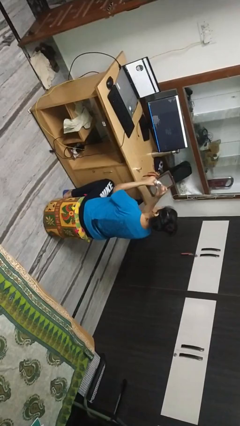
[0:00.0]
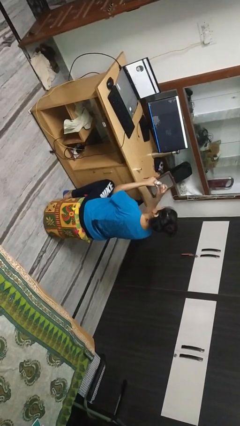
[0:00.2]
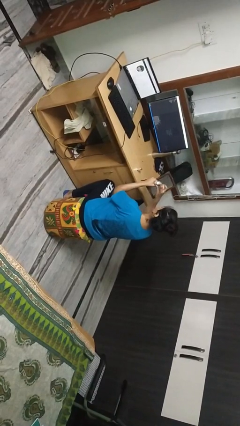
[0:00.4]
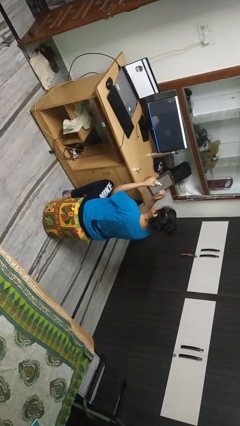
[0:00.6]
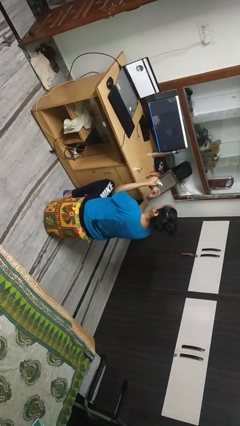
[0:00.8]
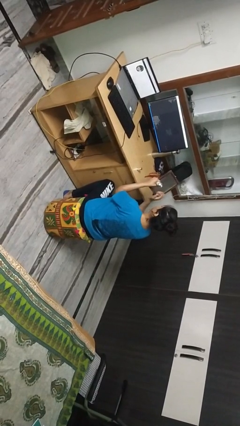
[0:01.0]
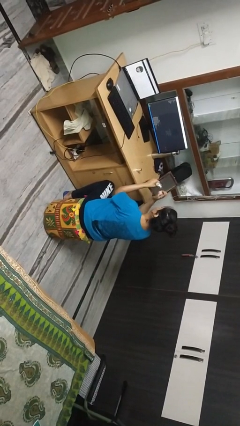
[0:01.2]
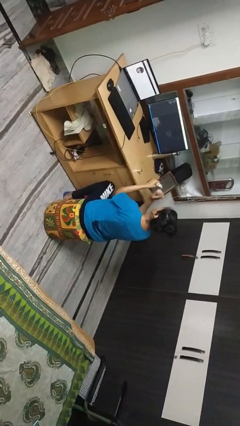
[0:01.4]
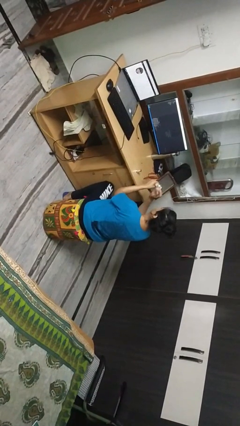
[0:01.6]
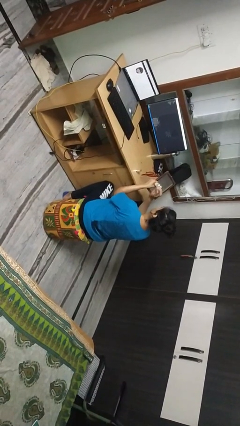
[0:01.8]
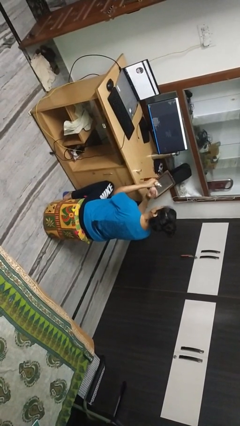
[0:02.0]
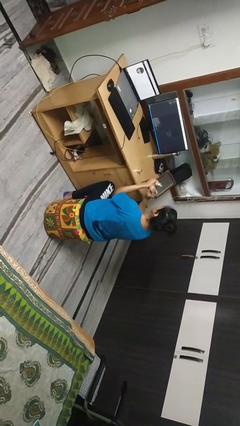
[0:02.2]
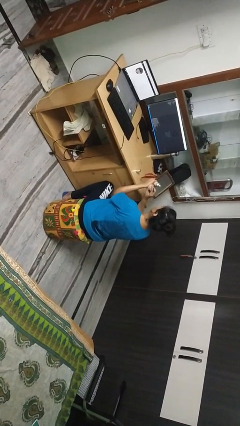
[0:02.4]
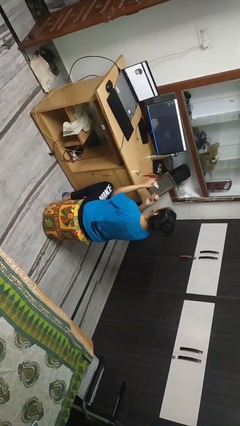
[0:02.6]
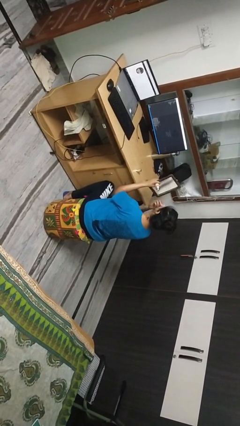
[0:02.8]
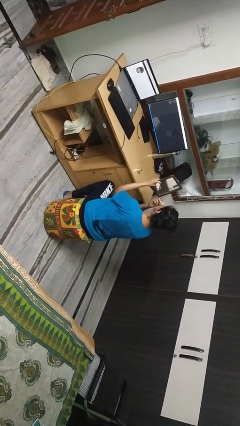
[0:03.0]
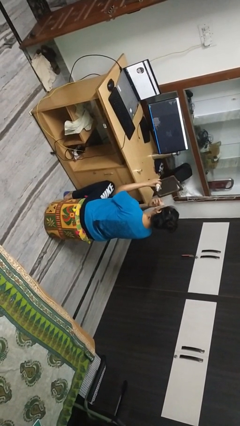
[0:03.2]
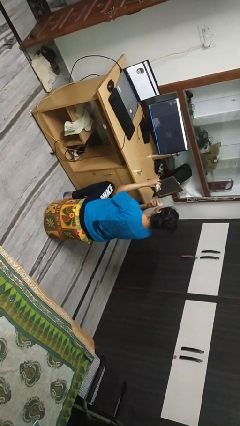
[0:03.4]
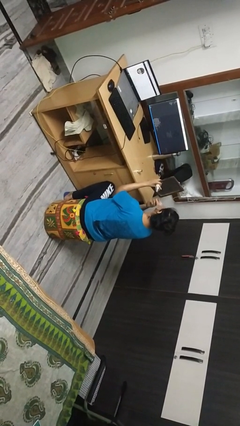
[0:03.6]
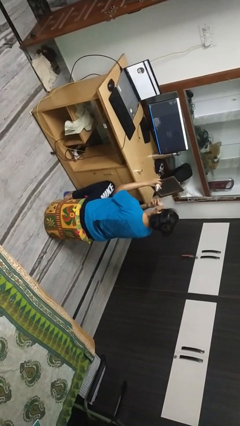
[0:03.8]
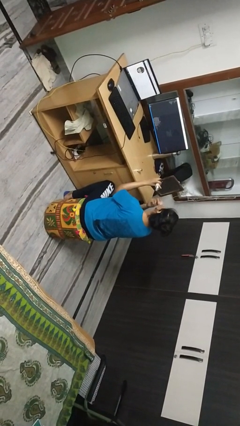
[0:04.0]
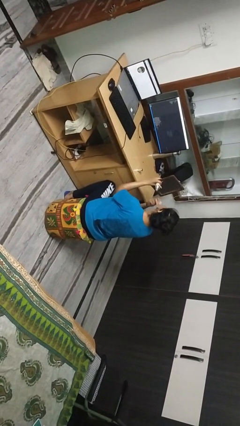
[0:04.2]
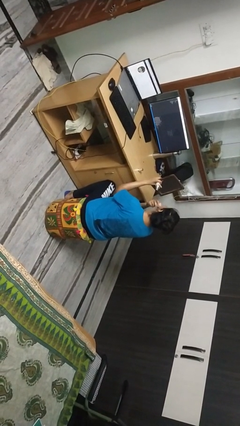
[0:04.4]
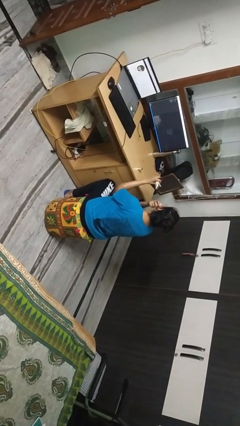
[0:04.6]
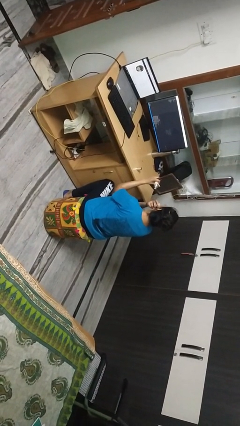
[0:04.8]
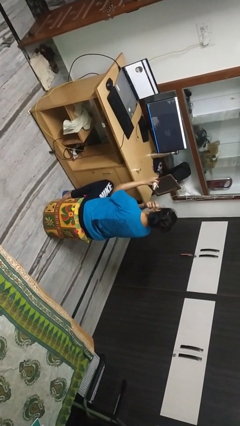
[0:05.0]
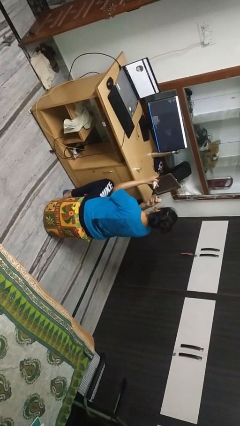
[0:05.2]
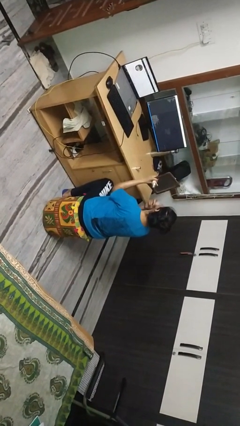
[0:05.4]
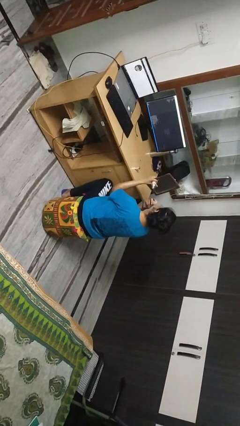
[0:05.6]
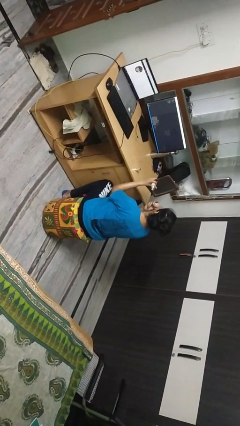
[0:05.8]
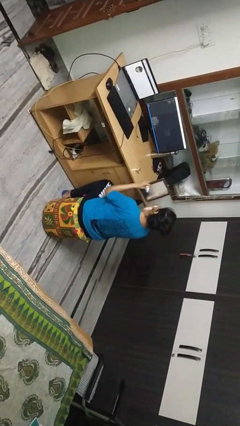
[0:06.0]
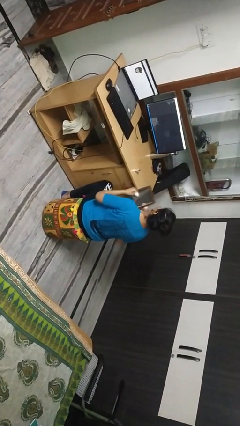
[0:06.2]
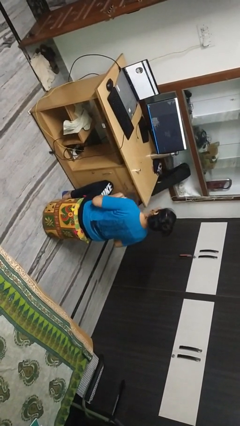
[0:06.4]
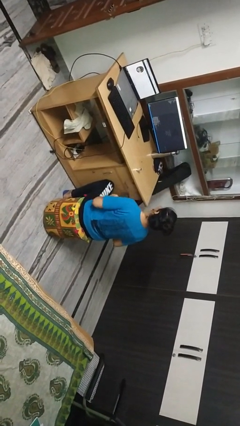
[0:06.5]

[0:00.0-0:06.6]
person applies foundation makeup

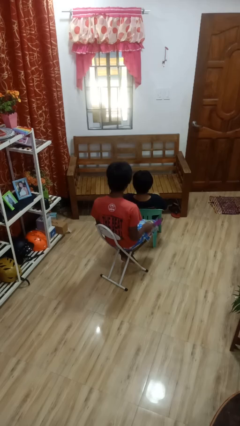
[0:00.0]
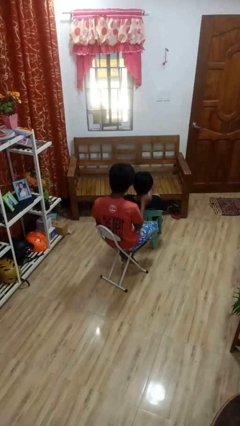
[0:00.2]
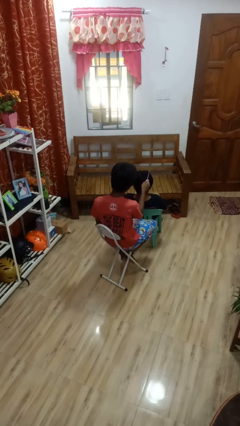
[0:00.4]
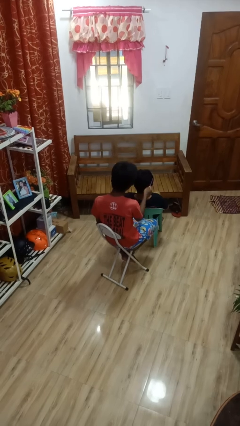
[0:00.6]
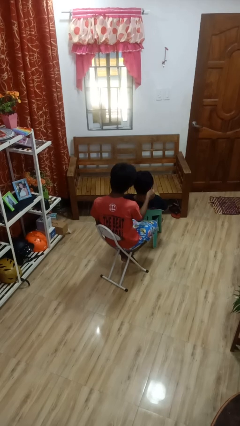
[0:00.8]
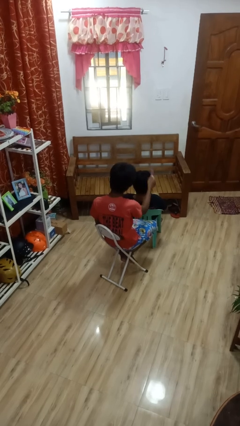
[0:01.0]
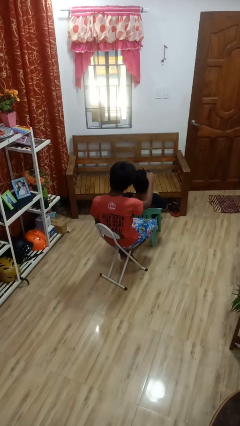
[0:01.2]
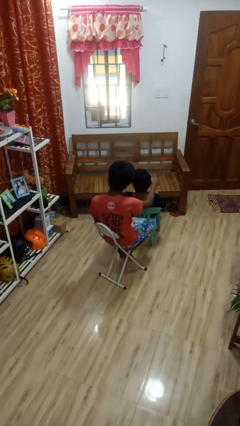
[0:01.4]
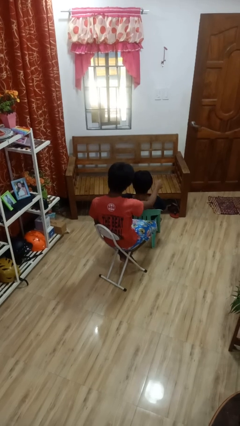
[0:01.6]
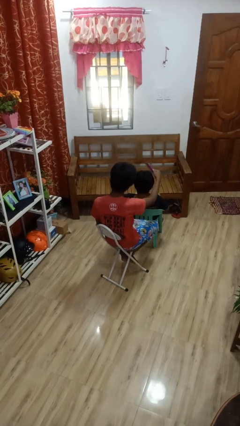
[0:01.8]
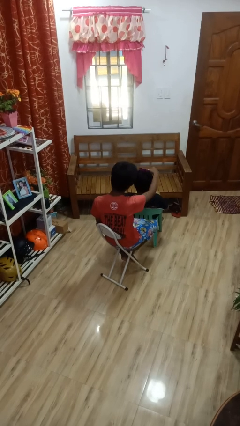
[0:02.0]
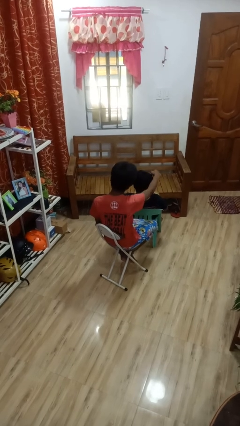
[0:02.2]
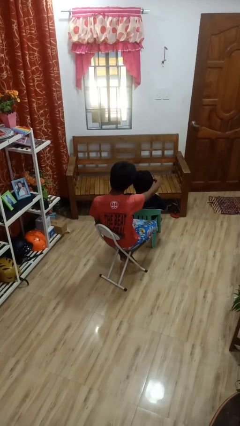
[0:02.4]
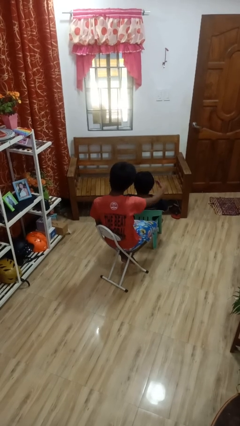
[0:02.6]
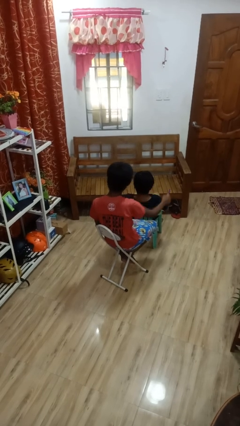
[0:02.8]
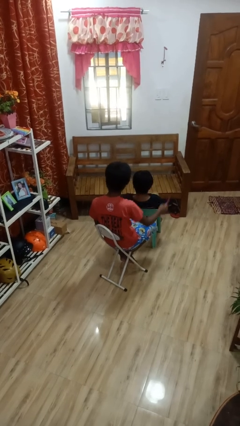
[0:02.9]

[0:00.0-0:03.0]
person brushes hair of person

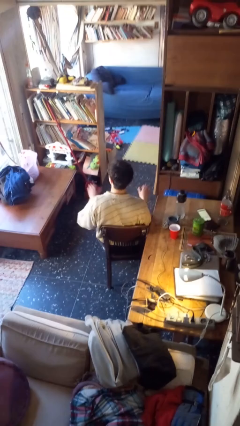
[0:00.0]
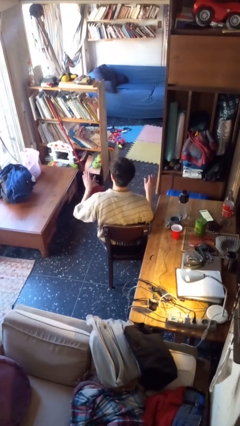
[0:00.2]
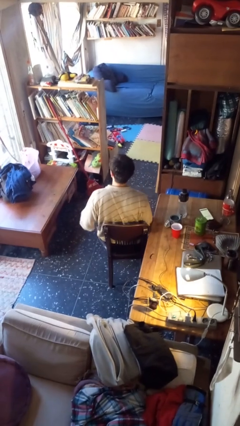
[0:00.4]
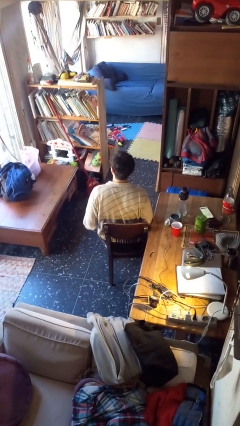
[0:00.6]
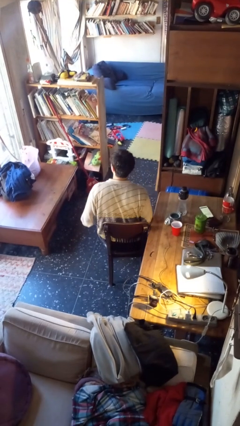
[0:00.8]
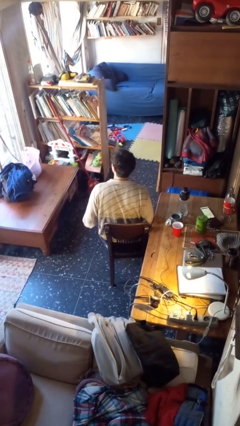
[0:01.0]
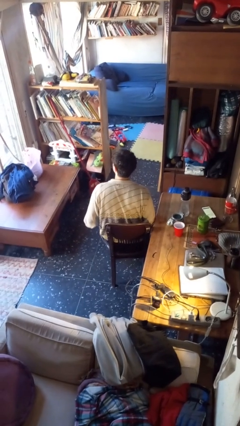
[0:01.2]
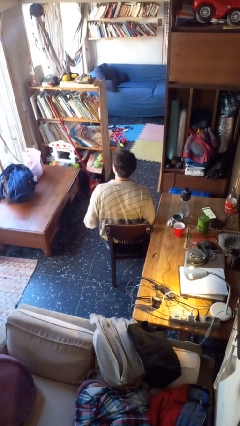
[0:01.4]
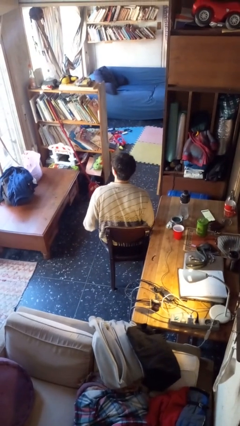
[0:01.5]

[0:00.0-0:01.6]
person slaps hands on thighs

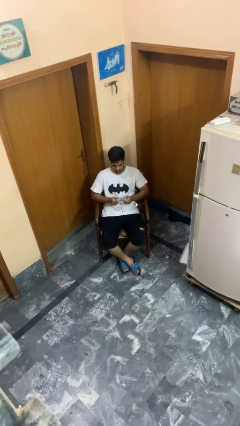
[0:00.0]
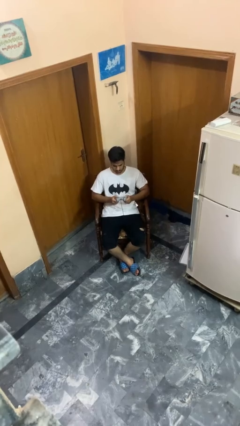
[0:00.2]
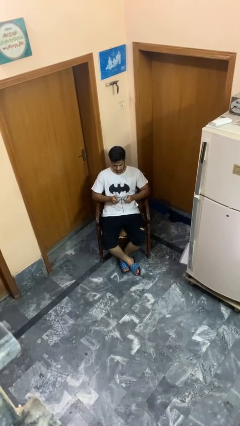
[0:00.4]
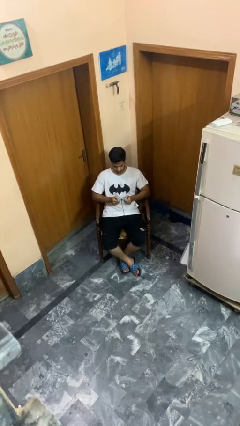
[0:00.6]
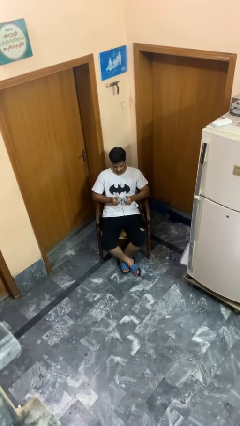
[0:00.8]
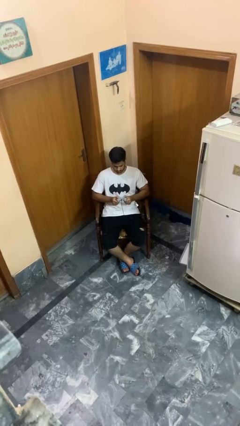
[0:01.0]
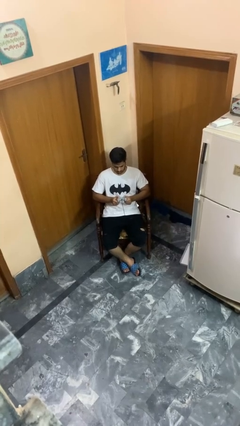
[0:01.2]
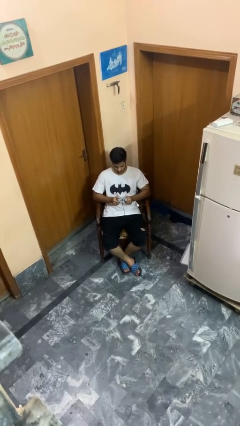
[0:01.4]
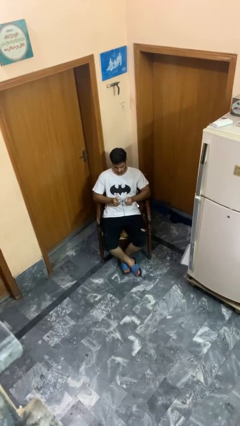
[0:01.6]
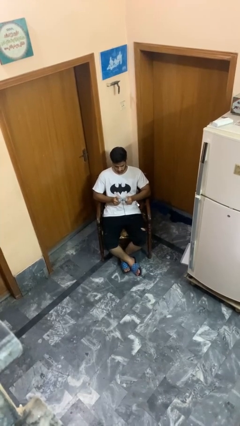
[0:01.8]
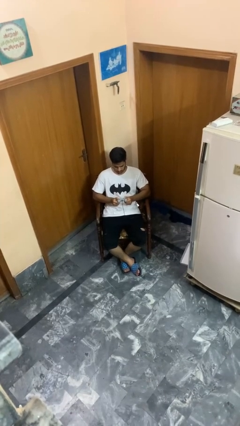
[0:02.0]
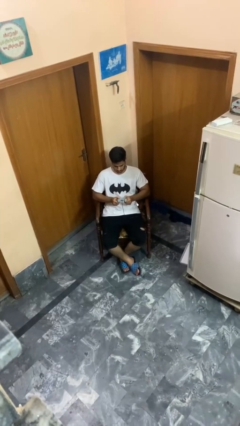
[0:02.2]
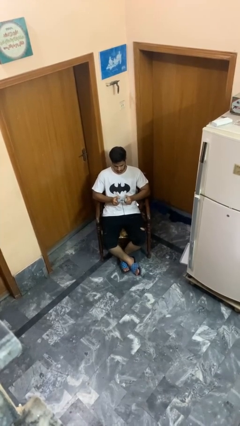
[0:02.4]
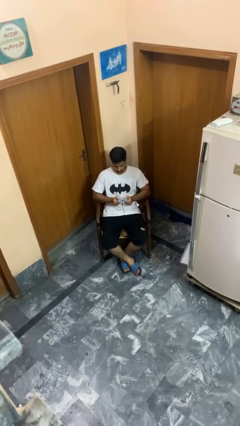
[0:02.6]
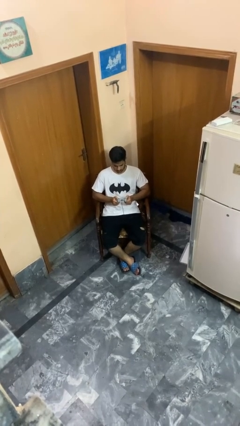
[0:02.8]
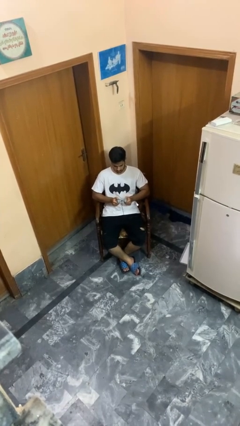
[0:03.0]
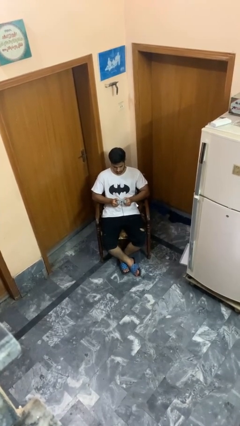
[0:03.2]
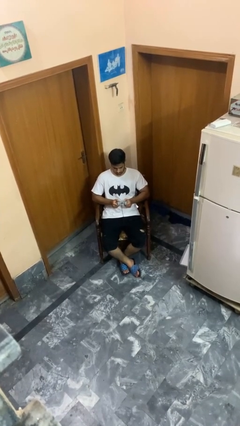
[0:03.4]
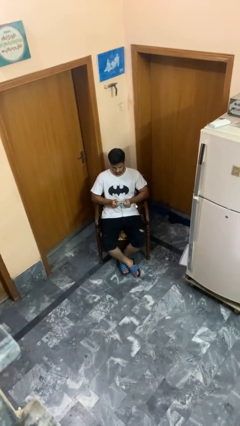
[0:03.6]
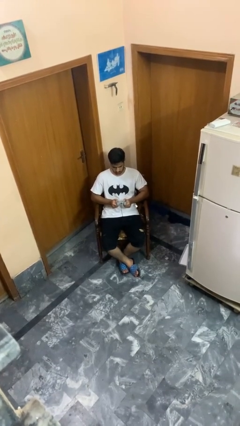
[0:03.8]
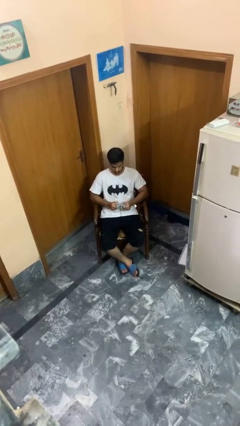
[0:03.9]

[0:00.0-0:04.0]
person interacts with handheld game

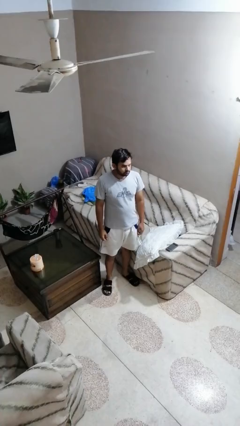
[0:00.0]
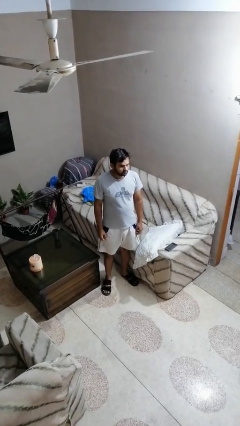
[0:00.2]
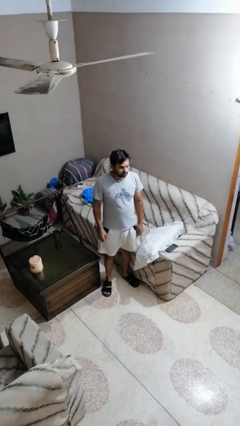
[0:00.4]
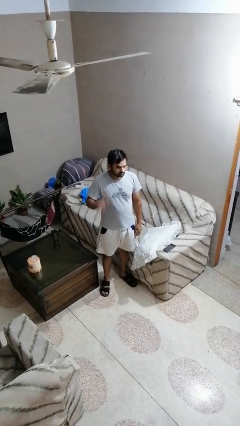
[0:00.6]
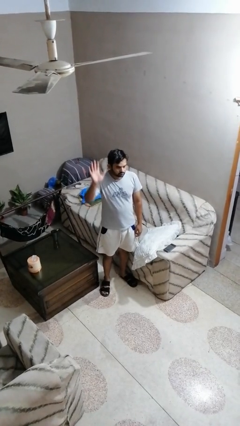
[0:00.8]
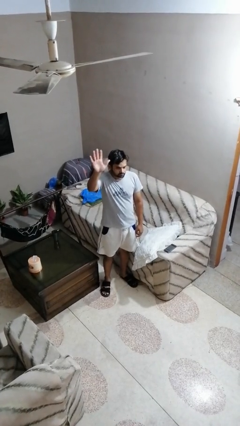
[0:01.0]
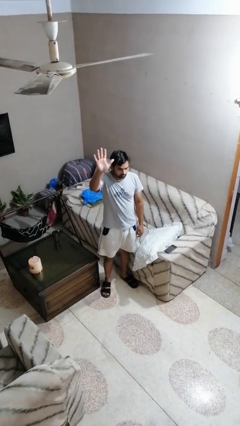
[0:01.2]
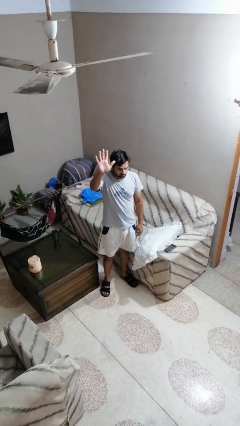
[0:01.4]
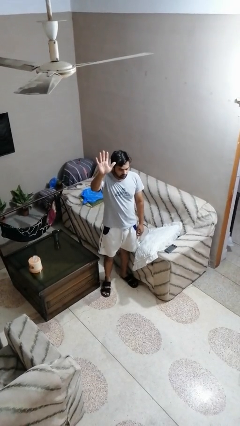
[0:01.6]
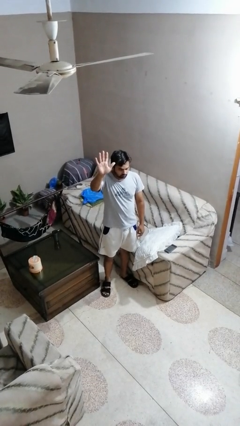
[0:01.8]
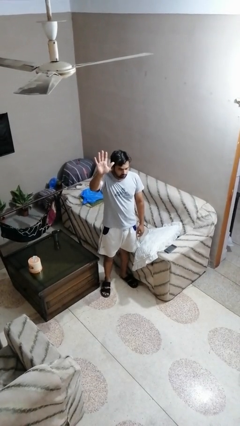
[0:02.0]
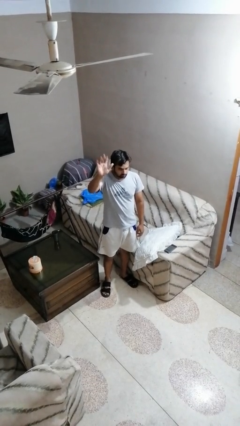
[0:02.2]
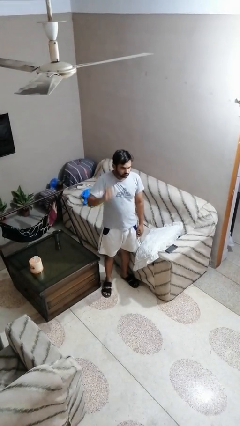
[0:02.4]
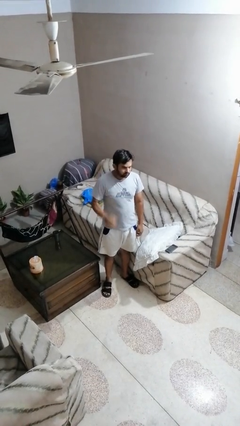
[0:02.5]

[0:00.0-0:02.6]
person gestures stop
